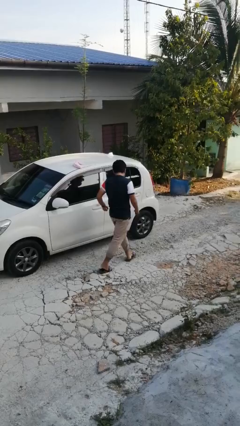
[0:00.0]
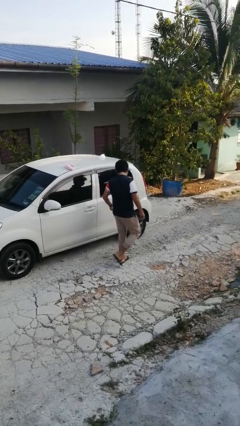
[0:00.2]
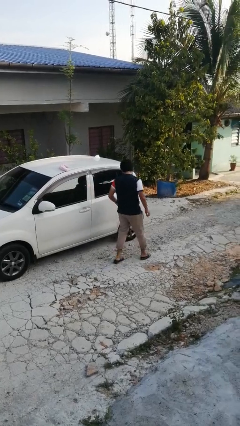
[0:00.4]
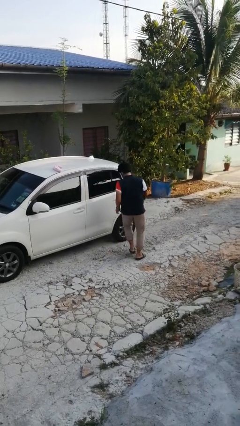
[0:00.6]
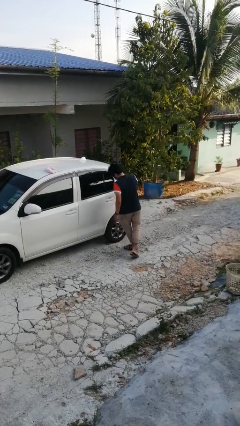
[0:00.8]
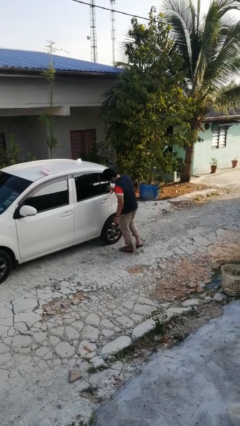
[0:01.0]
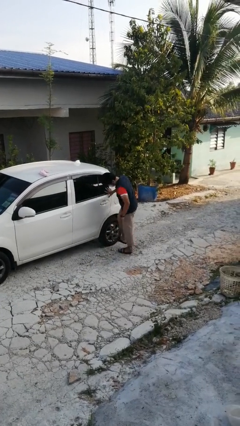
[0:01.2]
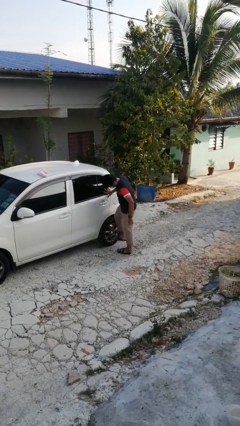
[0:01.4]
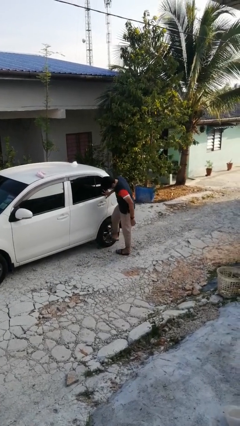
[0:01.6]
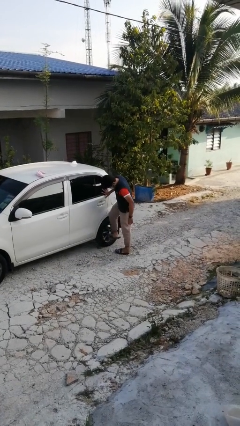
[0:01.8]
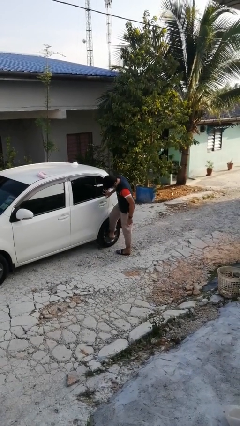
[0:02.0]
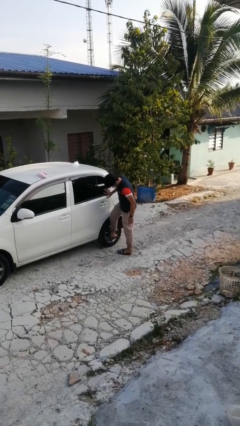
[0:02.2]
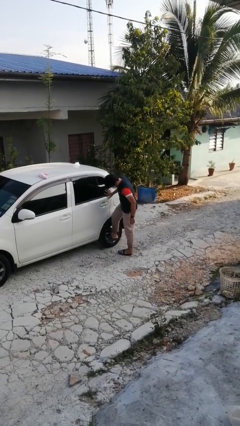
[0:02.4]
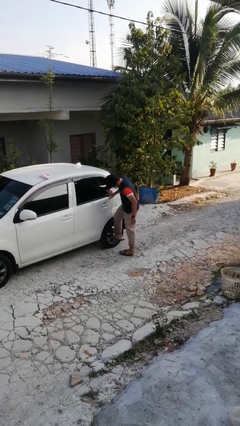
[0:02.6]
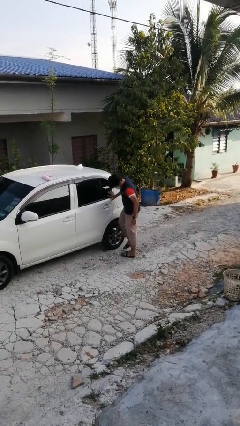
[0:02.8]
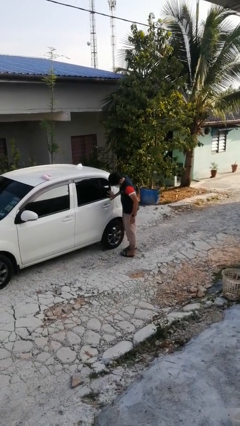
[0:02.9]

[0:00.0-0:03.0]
person kicks car tires

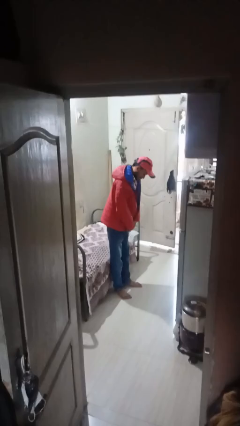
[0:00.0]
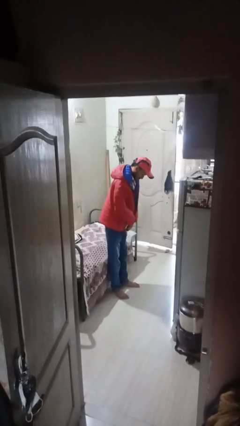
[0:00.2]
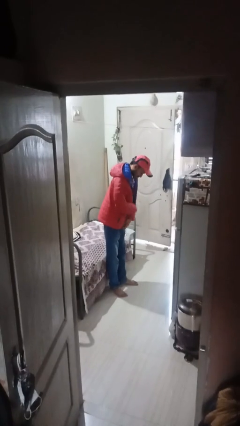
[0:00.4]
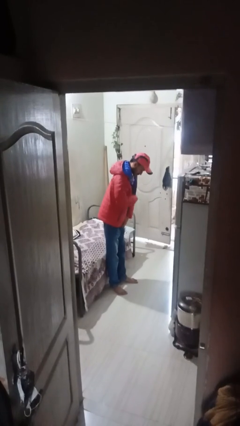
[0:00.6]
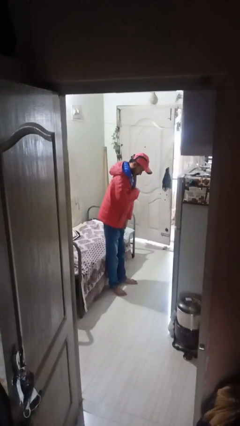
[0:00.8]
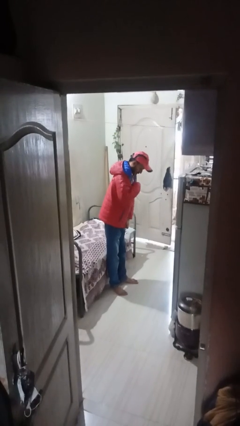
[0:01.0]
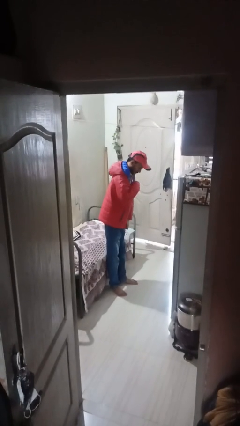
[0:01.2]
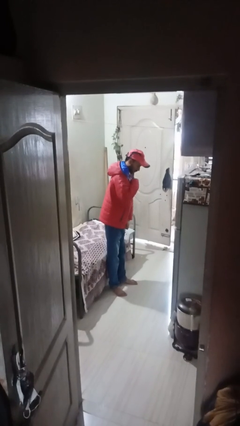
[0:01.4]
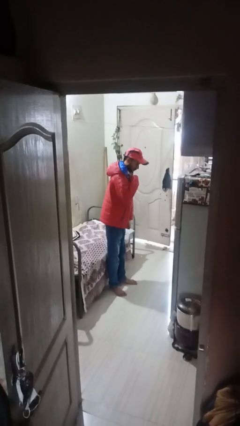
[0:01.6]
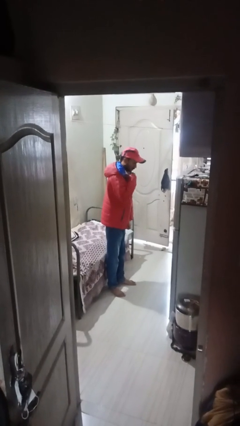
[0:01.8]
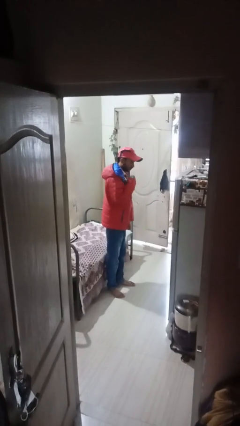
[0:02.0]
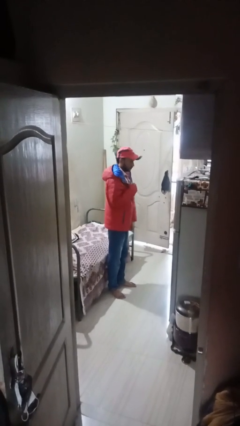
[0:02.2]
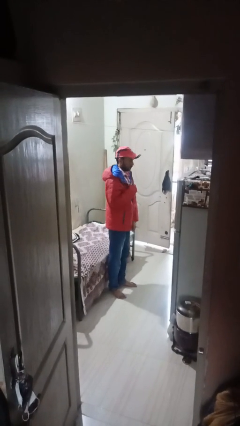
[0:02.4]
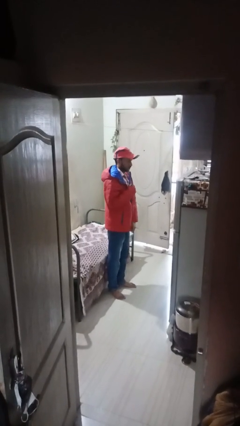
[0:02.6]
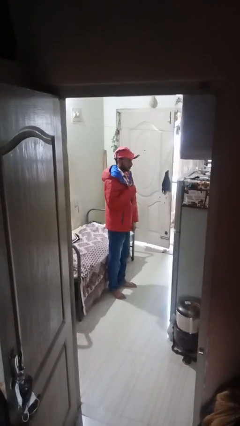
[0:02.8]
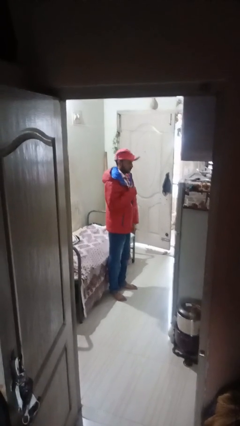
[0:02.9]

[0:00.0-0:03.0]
person zips up jacket

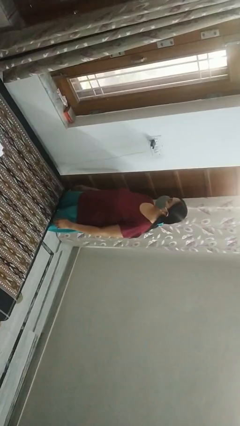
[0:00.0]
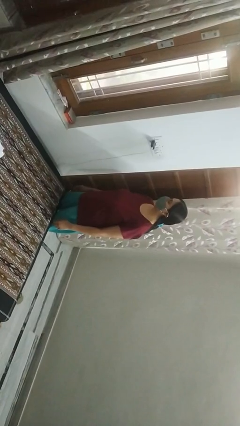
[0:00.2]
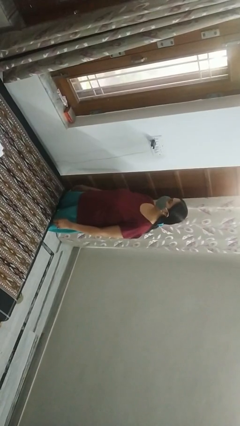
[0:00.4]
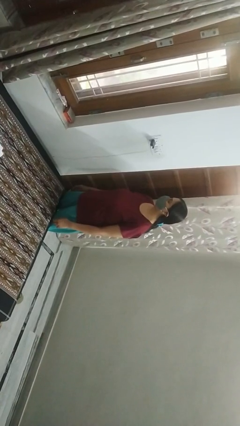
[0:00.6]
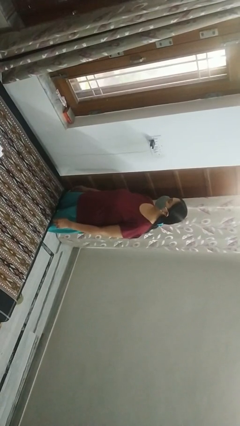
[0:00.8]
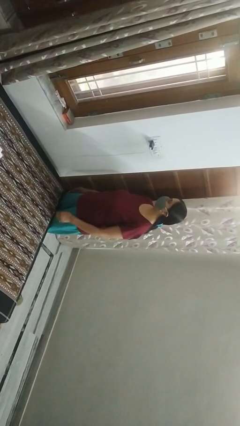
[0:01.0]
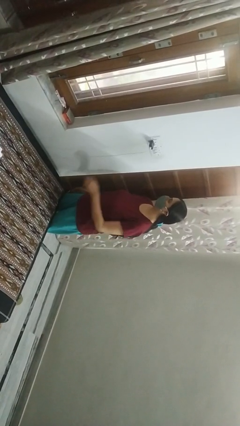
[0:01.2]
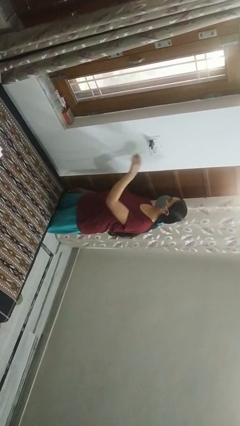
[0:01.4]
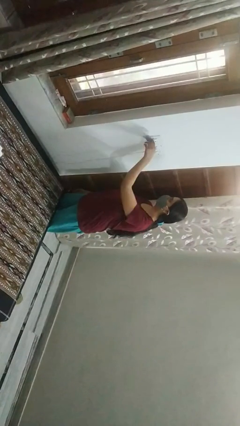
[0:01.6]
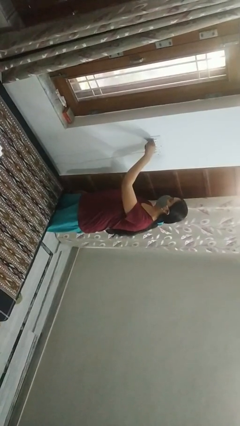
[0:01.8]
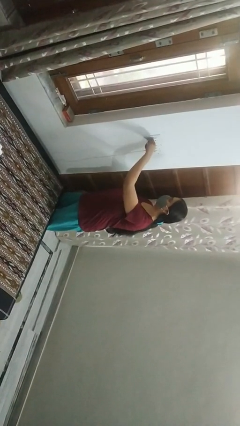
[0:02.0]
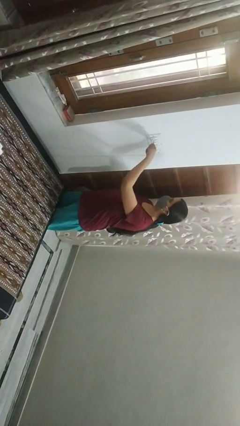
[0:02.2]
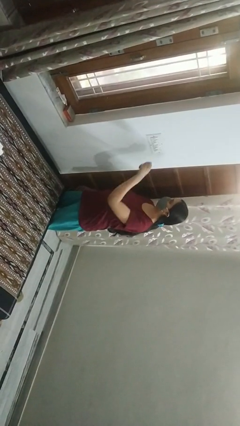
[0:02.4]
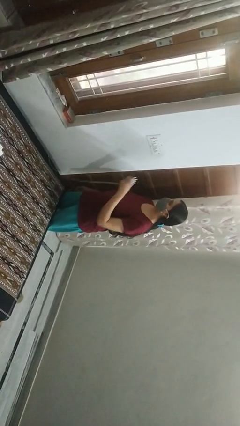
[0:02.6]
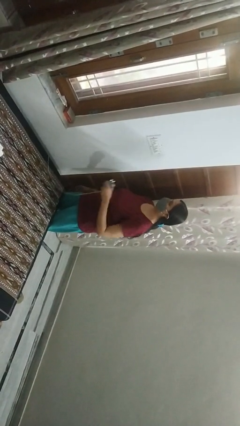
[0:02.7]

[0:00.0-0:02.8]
person unplugs from electrical socket

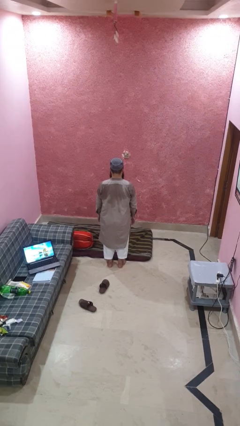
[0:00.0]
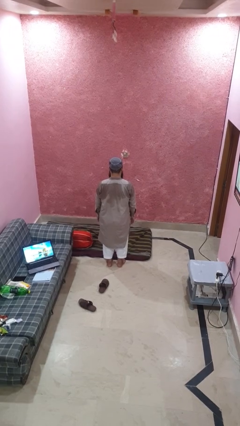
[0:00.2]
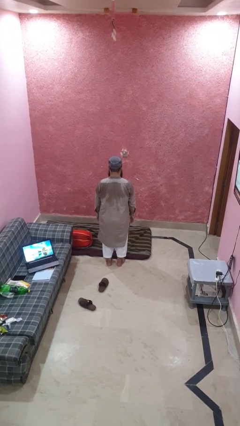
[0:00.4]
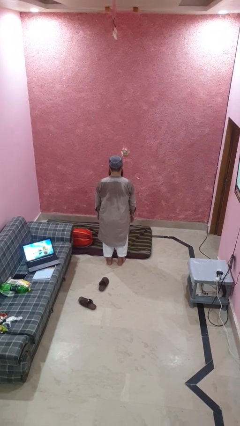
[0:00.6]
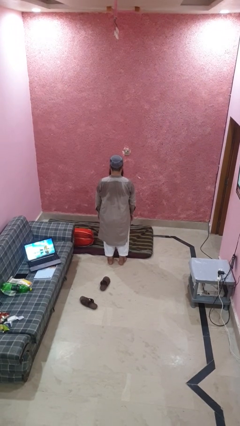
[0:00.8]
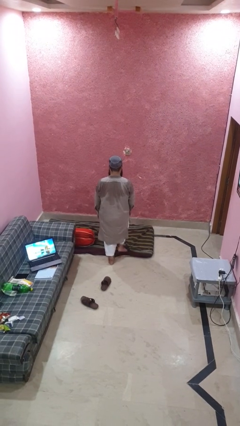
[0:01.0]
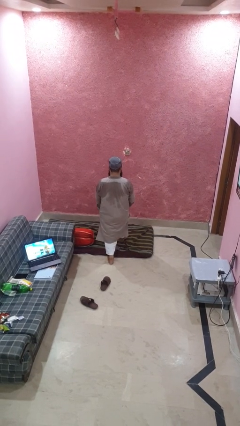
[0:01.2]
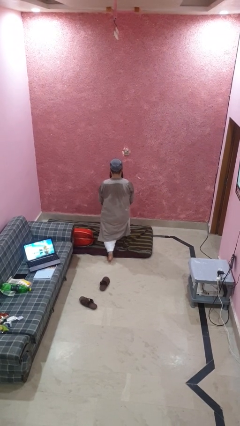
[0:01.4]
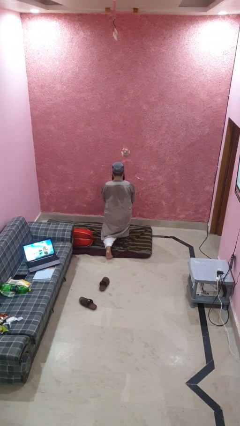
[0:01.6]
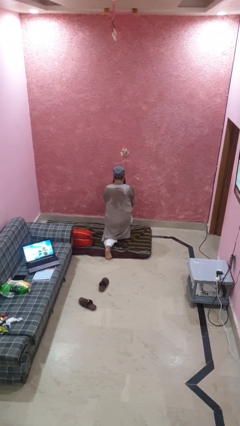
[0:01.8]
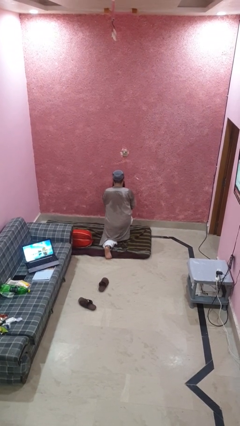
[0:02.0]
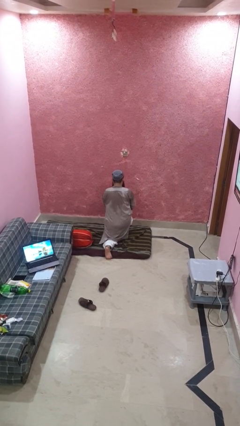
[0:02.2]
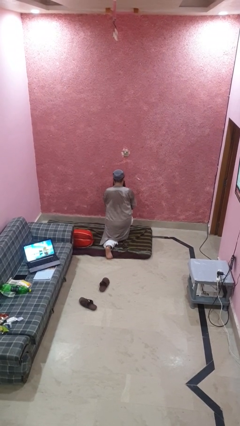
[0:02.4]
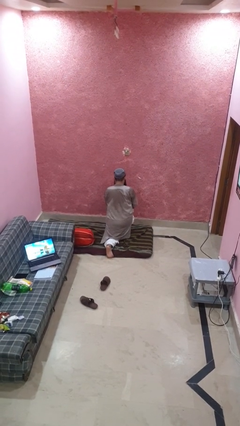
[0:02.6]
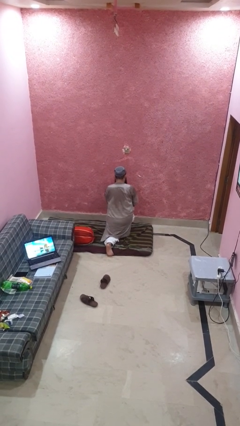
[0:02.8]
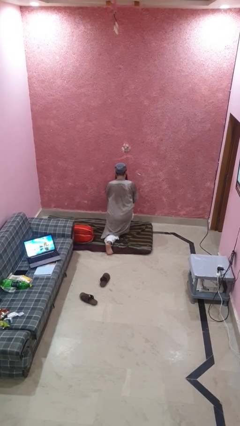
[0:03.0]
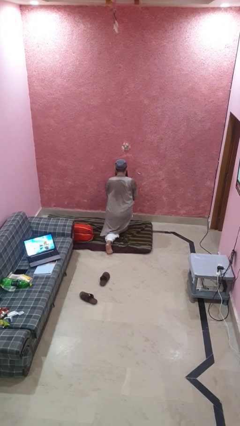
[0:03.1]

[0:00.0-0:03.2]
person exercises with lunges

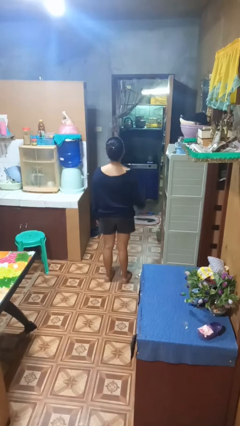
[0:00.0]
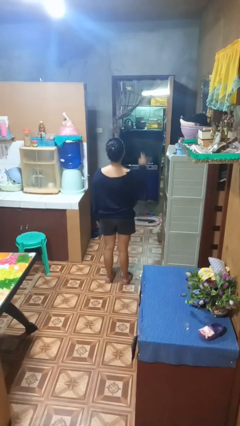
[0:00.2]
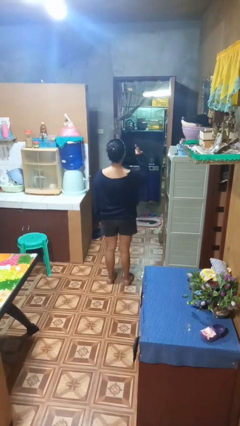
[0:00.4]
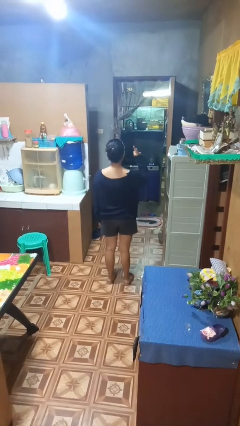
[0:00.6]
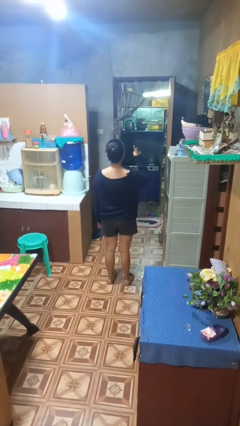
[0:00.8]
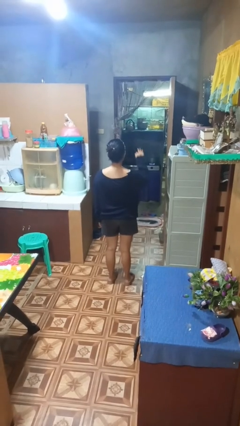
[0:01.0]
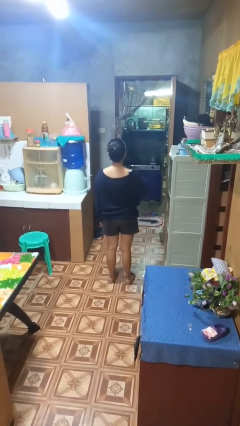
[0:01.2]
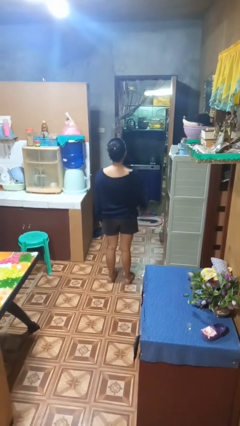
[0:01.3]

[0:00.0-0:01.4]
person gestures number three

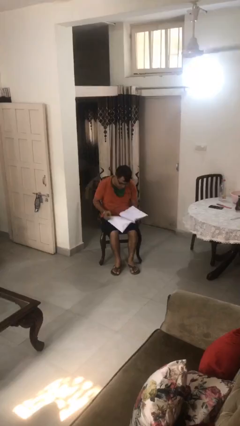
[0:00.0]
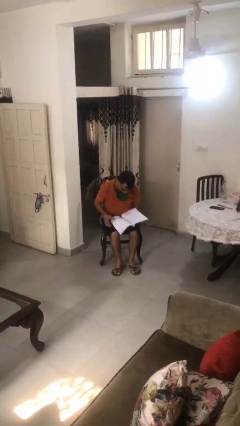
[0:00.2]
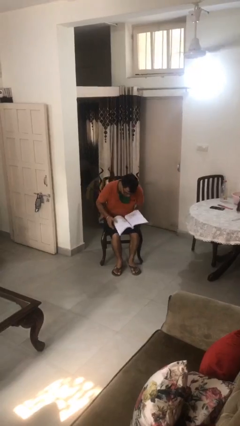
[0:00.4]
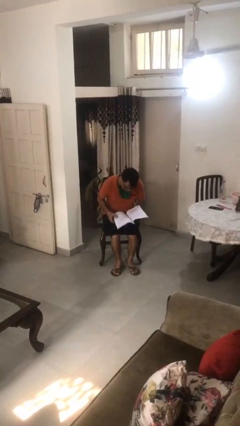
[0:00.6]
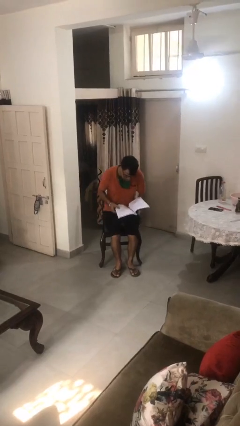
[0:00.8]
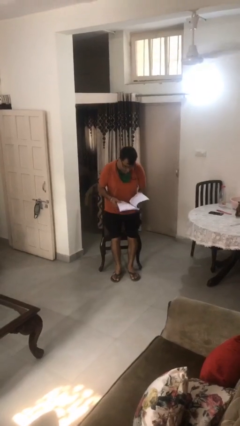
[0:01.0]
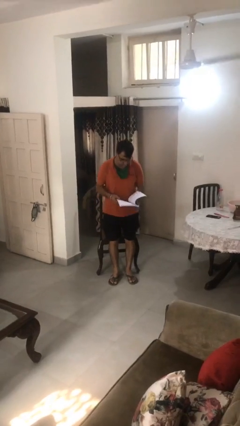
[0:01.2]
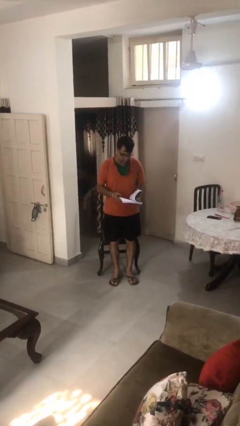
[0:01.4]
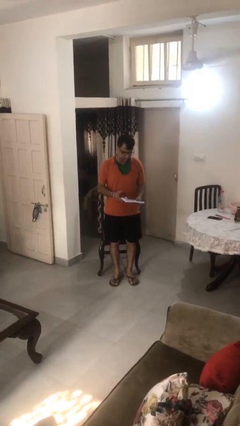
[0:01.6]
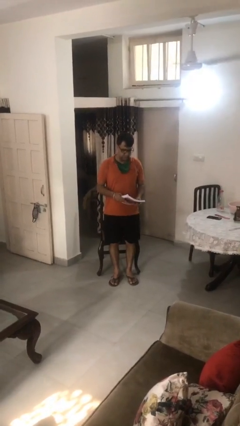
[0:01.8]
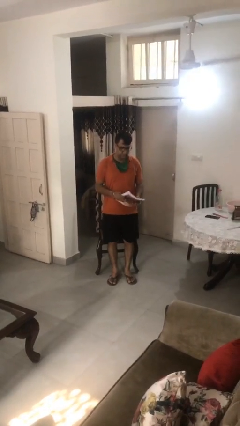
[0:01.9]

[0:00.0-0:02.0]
person stands up

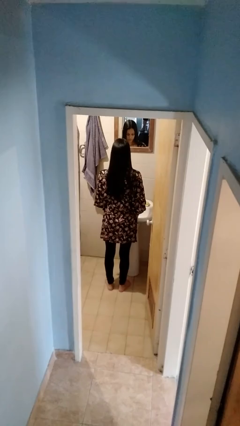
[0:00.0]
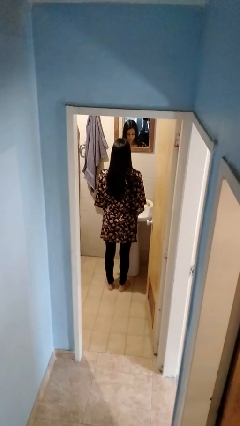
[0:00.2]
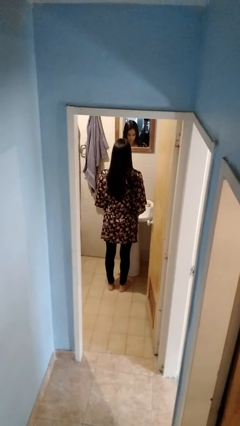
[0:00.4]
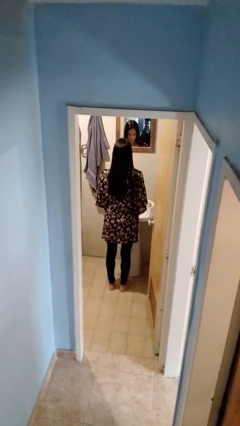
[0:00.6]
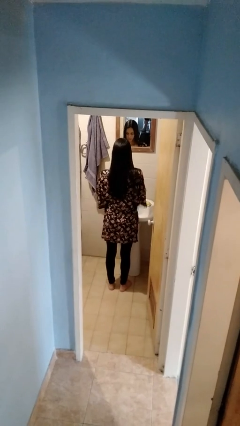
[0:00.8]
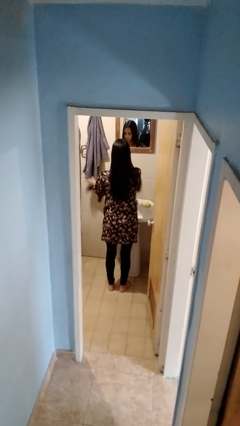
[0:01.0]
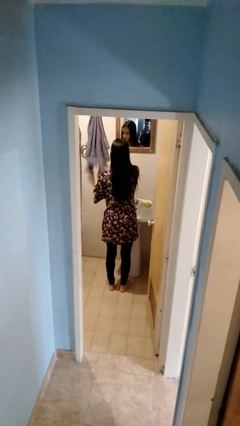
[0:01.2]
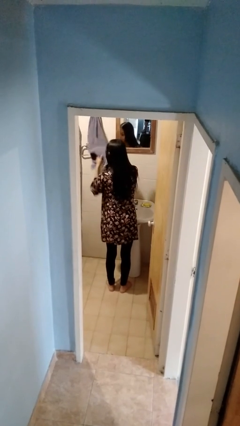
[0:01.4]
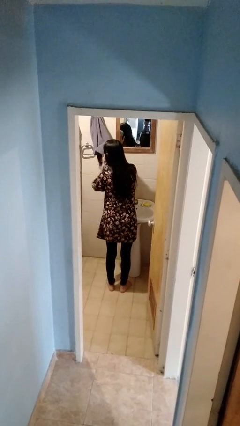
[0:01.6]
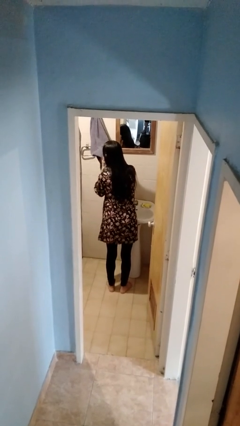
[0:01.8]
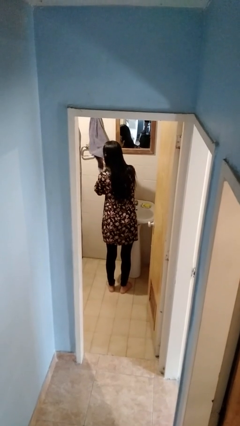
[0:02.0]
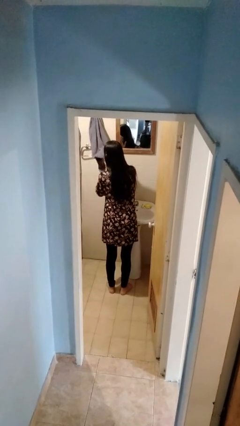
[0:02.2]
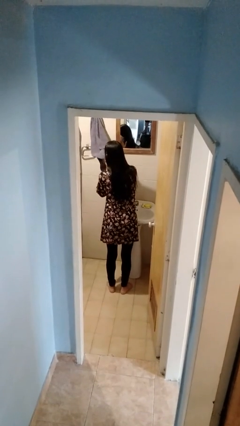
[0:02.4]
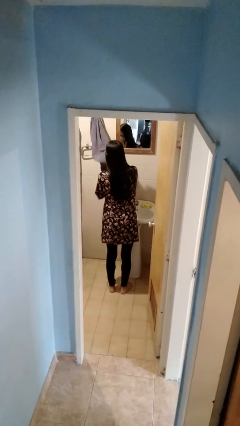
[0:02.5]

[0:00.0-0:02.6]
person dries face with towel
